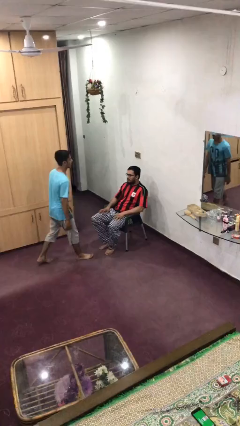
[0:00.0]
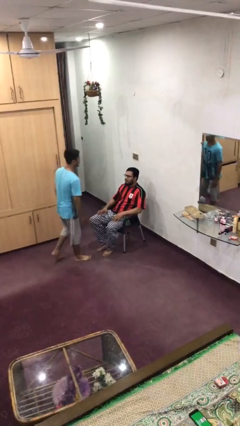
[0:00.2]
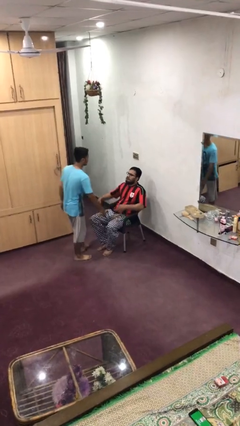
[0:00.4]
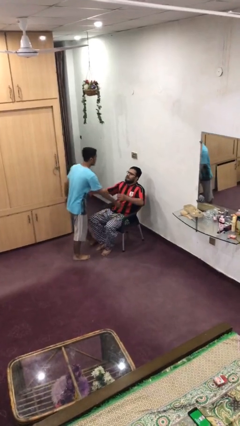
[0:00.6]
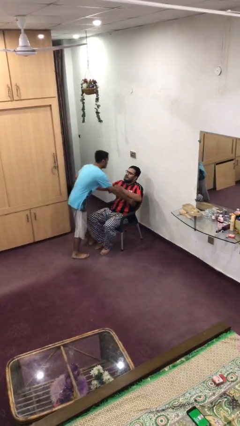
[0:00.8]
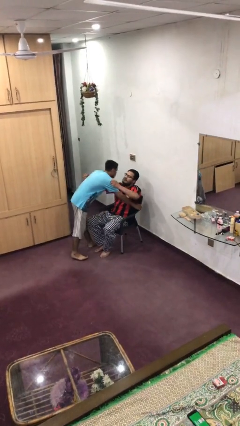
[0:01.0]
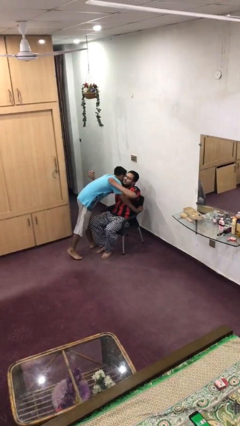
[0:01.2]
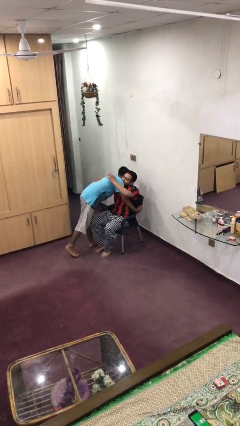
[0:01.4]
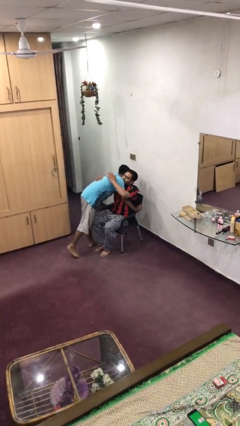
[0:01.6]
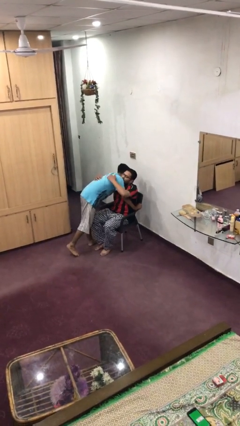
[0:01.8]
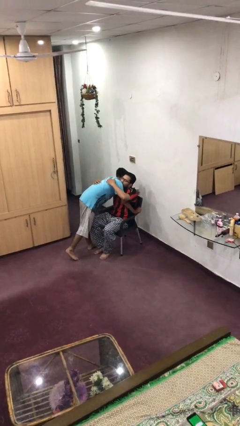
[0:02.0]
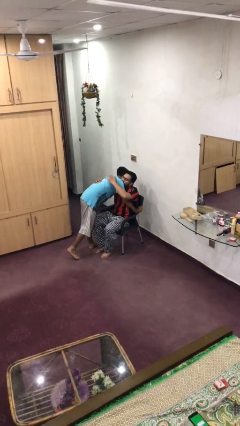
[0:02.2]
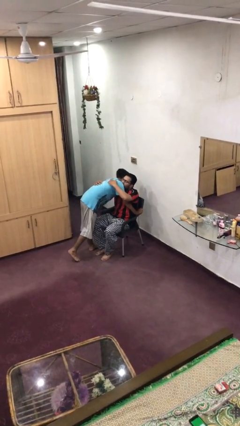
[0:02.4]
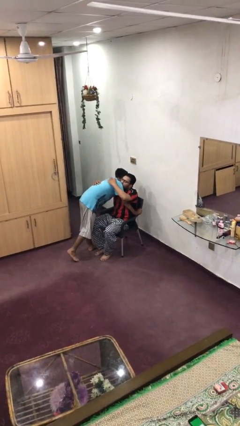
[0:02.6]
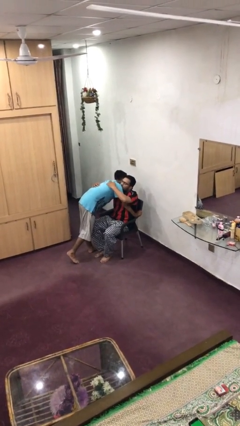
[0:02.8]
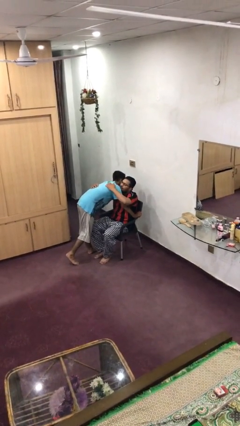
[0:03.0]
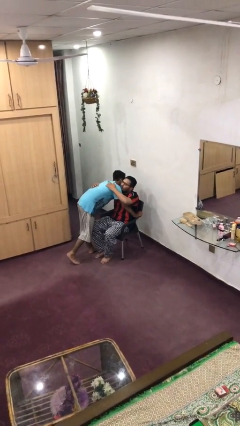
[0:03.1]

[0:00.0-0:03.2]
person embraces person

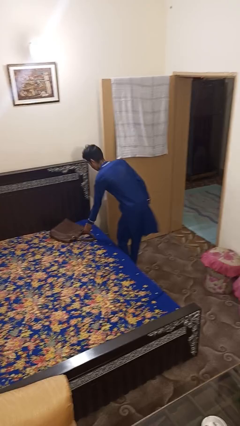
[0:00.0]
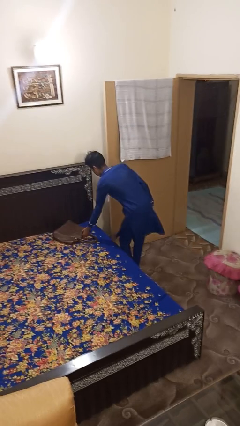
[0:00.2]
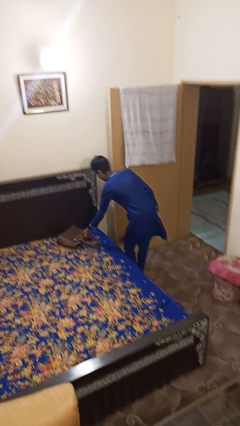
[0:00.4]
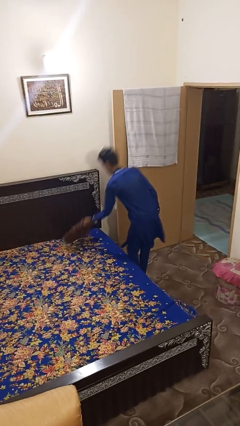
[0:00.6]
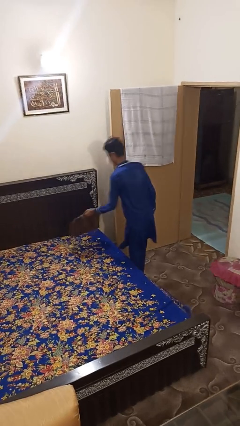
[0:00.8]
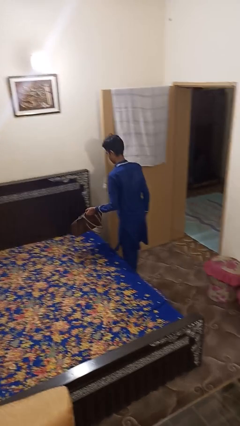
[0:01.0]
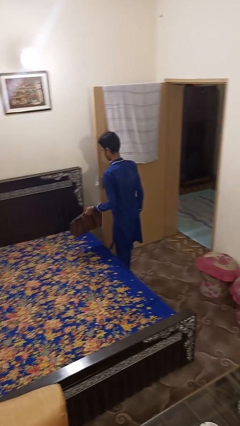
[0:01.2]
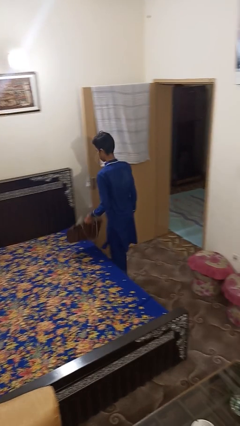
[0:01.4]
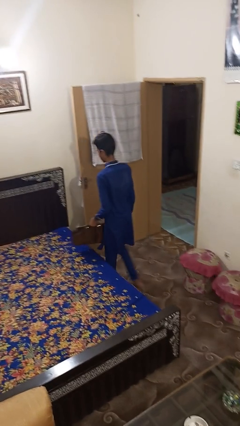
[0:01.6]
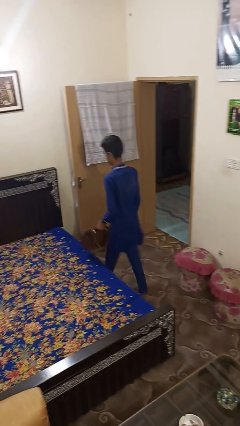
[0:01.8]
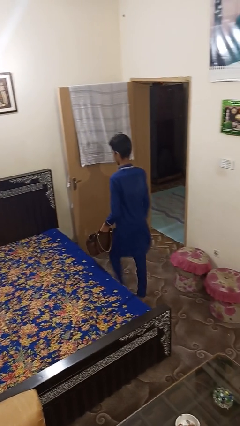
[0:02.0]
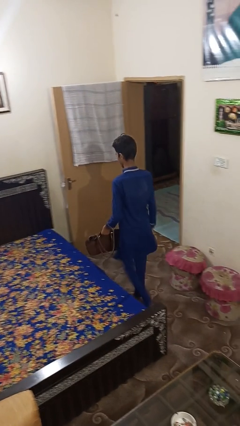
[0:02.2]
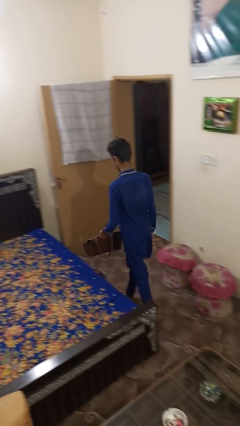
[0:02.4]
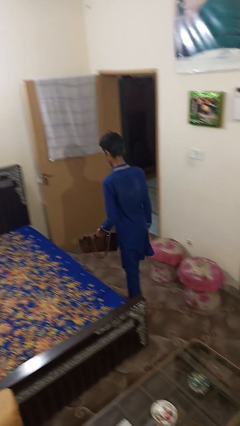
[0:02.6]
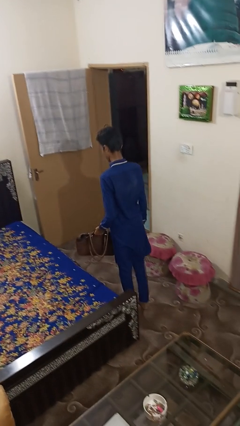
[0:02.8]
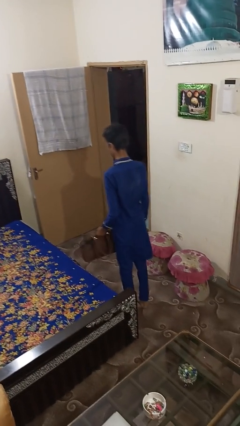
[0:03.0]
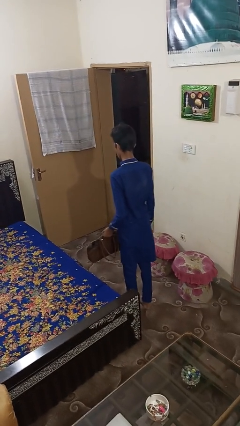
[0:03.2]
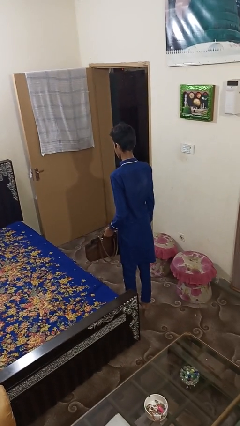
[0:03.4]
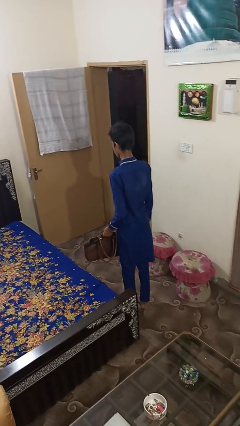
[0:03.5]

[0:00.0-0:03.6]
person picks up object from bed

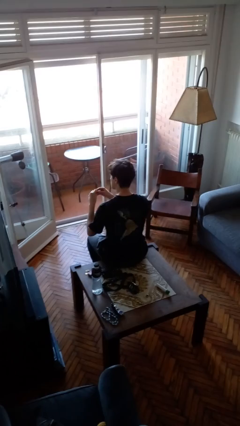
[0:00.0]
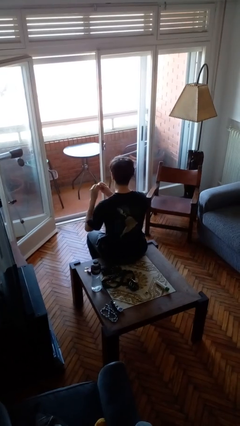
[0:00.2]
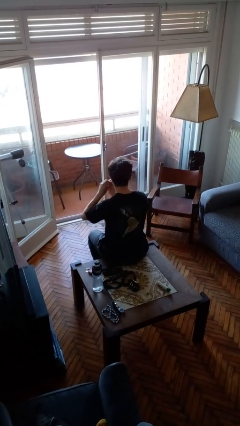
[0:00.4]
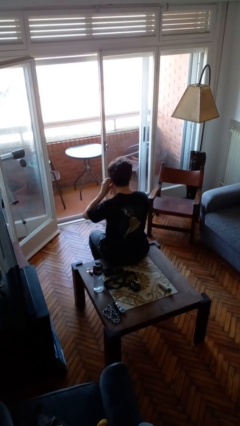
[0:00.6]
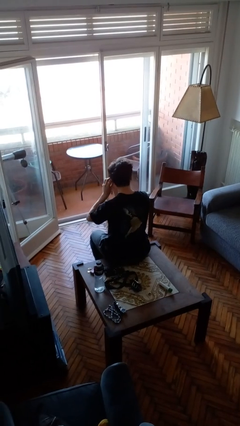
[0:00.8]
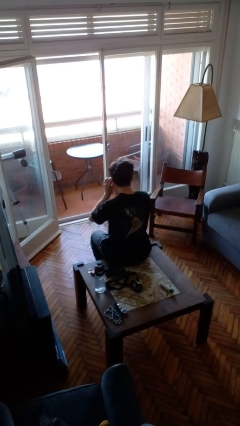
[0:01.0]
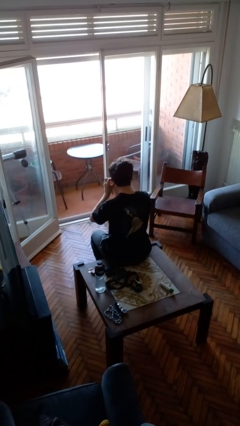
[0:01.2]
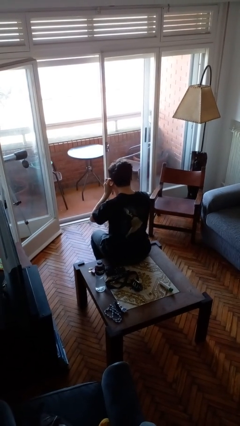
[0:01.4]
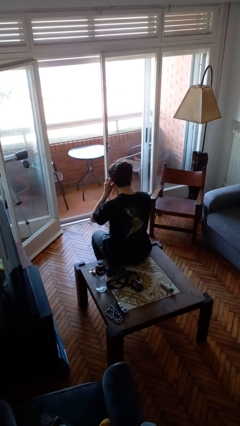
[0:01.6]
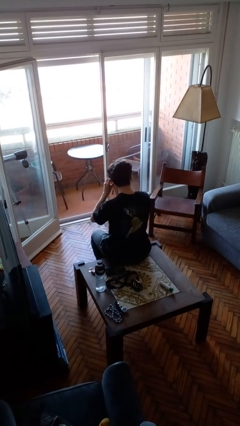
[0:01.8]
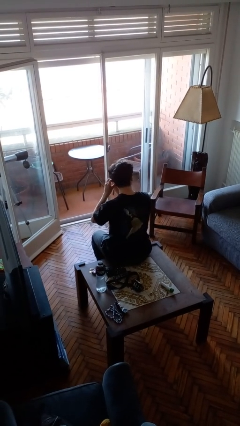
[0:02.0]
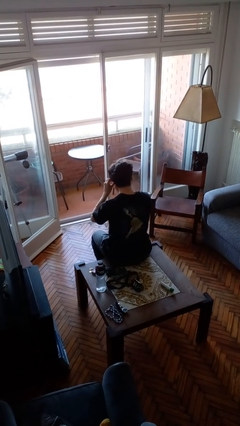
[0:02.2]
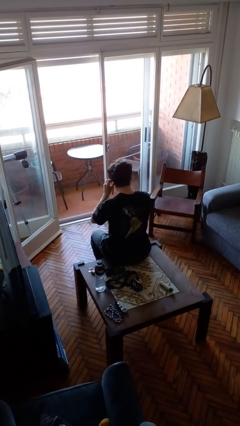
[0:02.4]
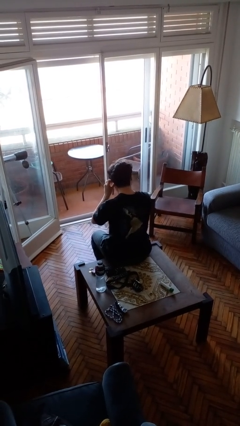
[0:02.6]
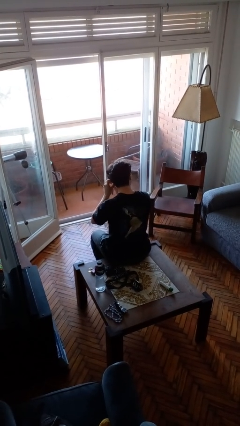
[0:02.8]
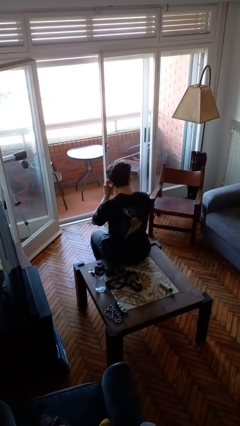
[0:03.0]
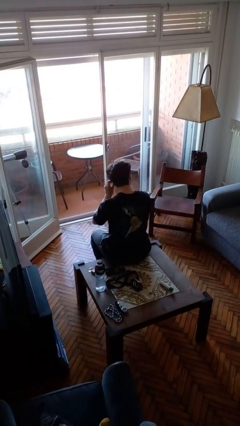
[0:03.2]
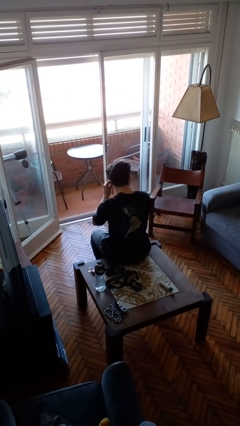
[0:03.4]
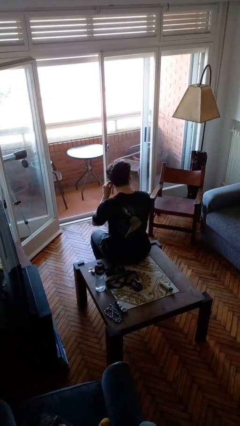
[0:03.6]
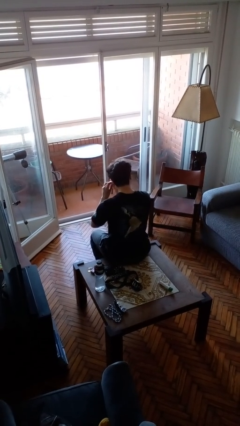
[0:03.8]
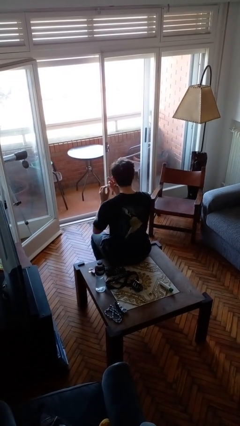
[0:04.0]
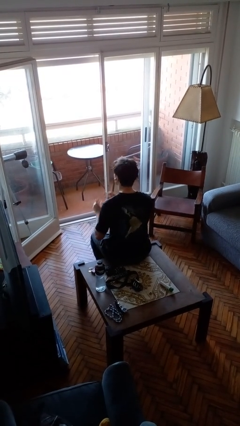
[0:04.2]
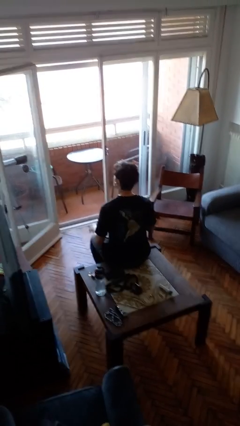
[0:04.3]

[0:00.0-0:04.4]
person puts on earrings

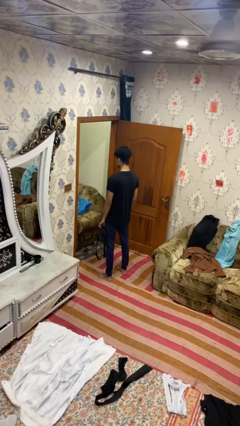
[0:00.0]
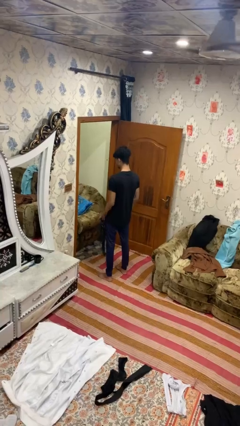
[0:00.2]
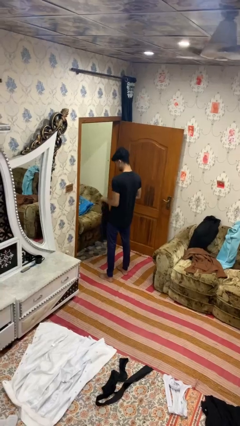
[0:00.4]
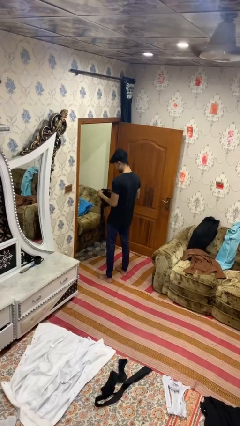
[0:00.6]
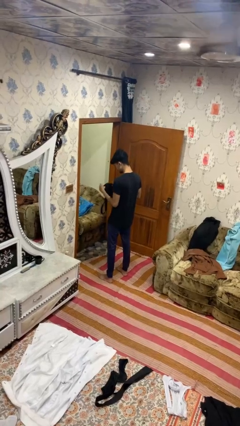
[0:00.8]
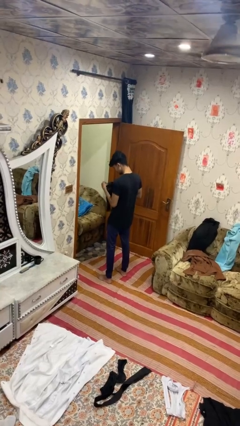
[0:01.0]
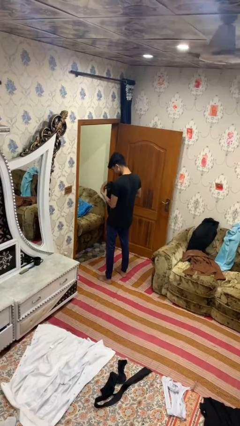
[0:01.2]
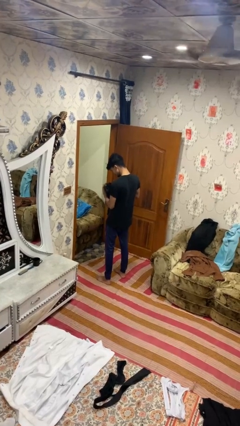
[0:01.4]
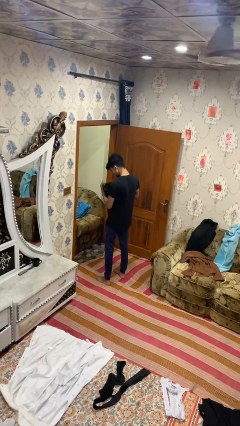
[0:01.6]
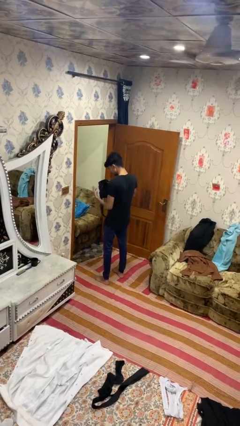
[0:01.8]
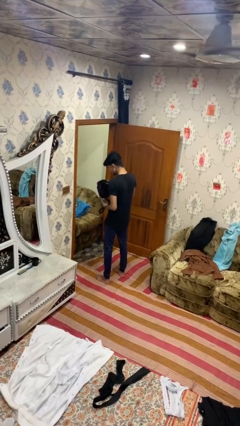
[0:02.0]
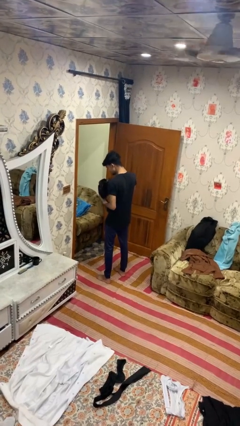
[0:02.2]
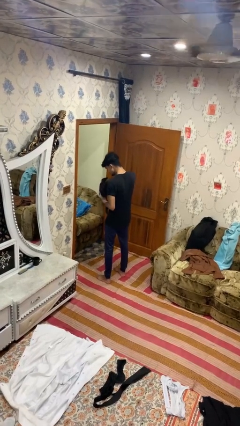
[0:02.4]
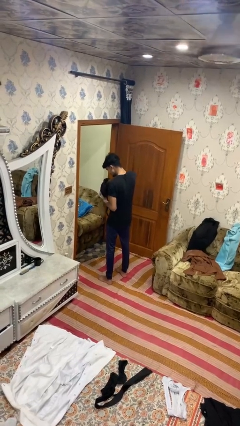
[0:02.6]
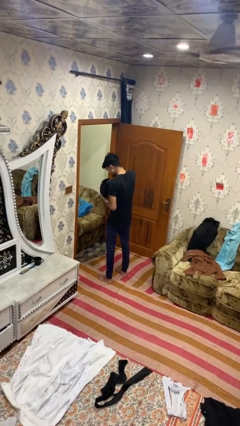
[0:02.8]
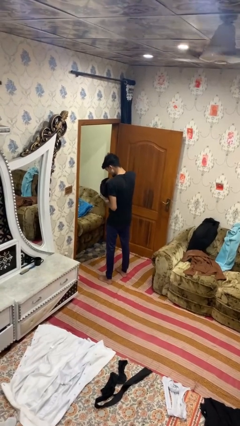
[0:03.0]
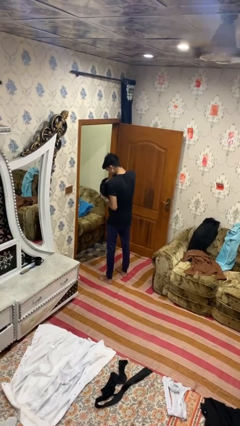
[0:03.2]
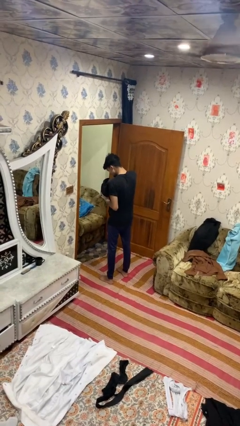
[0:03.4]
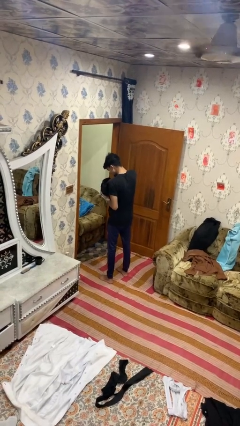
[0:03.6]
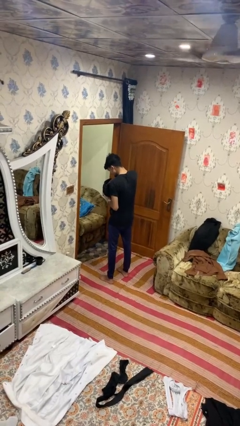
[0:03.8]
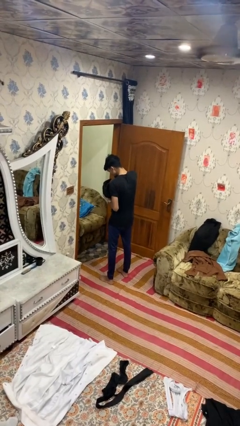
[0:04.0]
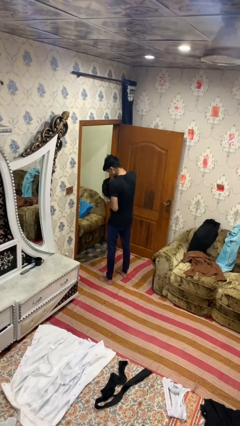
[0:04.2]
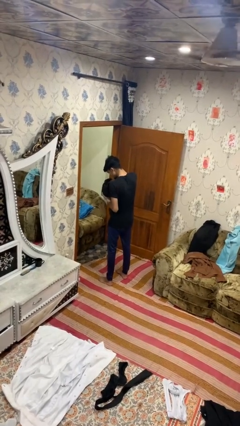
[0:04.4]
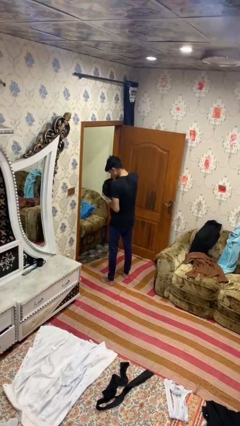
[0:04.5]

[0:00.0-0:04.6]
person searches in bag

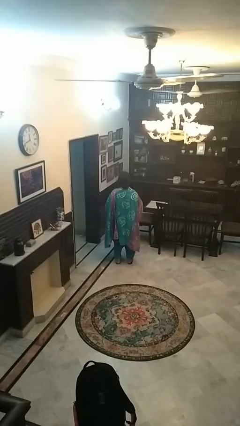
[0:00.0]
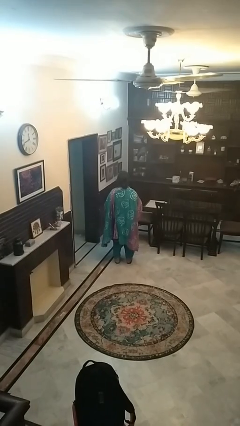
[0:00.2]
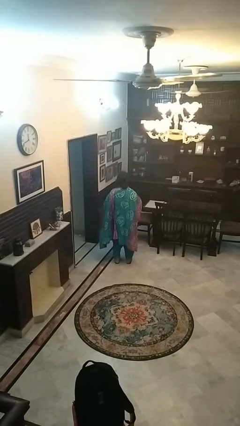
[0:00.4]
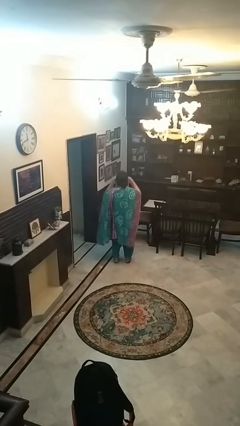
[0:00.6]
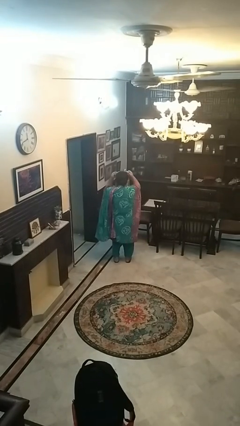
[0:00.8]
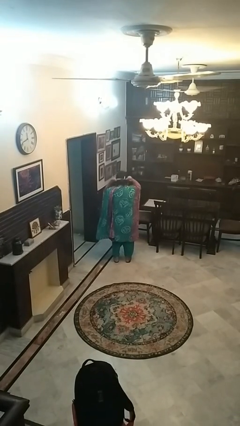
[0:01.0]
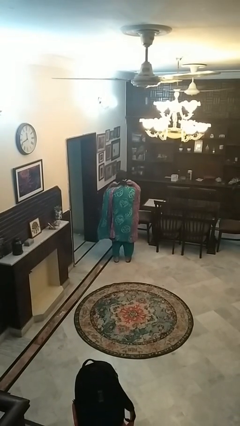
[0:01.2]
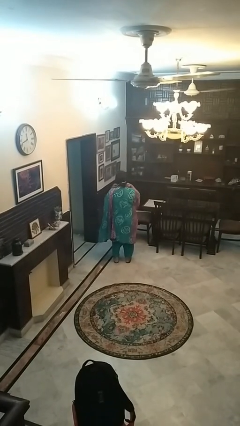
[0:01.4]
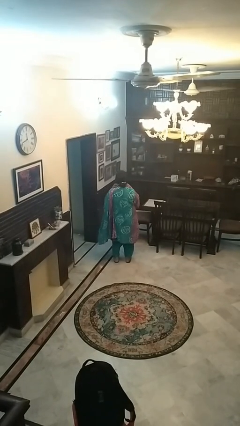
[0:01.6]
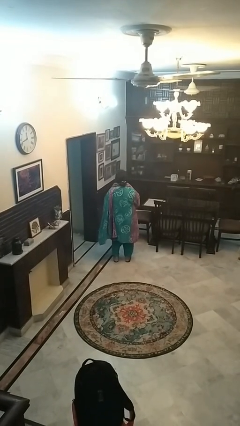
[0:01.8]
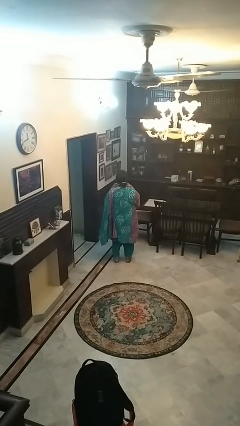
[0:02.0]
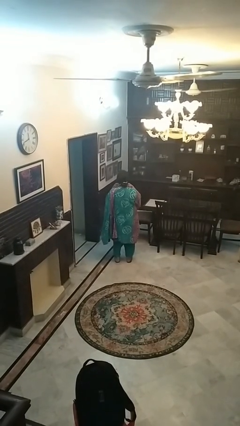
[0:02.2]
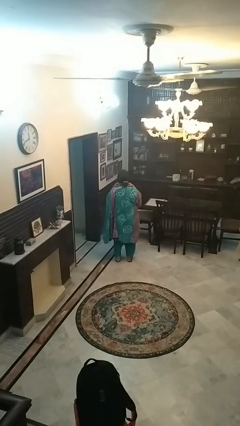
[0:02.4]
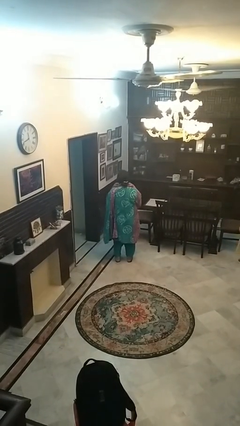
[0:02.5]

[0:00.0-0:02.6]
person puts on apron
